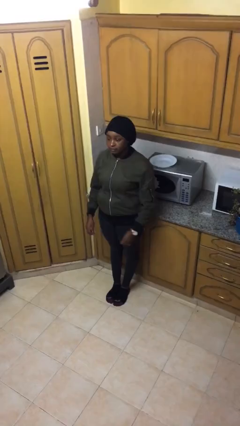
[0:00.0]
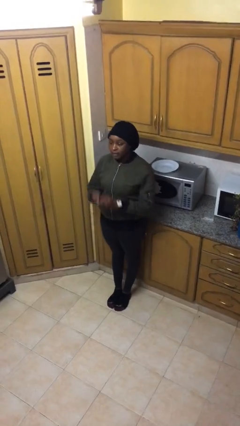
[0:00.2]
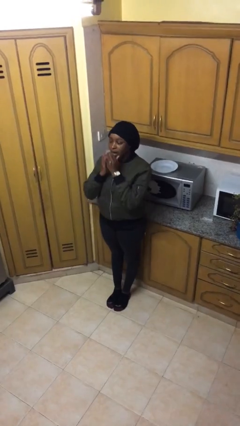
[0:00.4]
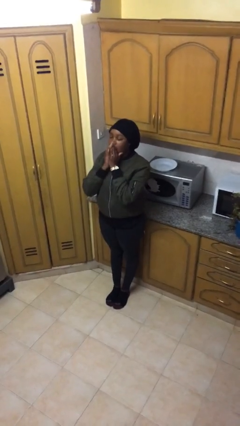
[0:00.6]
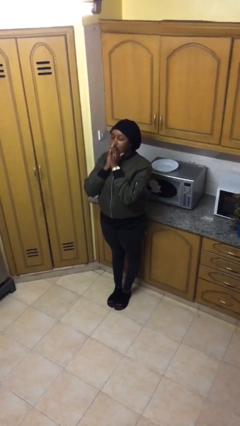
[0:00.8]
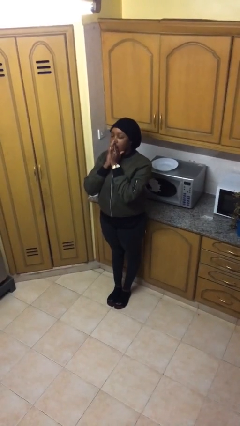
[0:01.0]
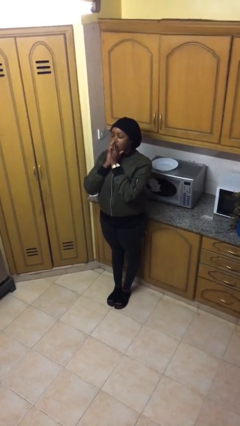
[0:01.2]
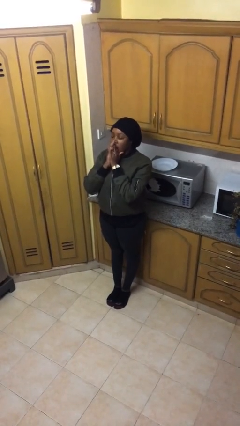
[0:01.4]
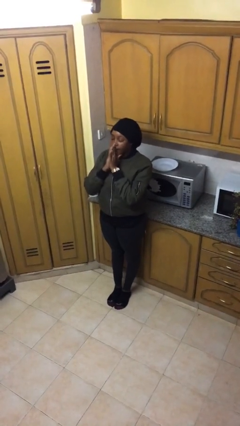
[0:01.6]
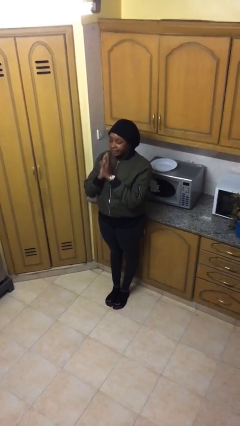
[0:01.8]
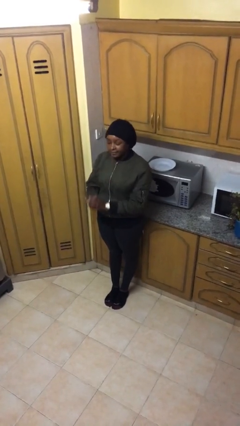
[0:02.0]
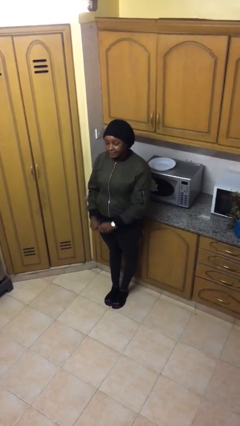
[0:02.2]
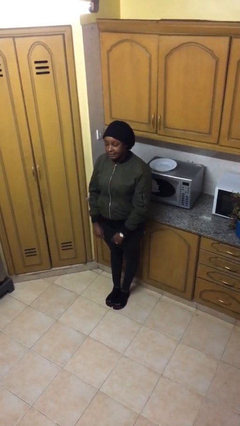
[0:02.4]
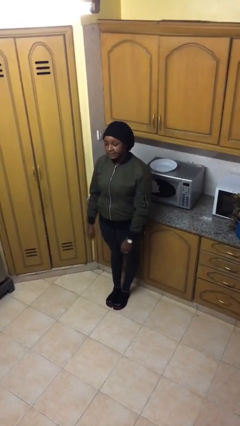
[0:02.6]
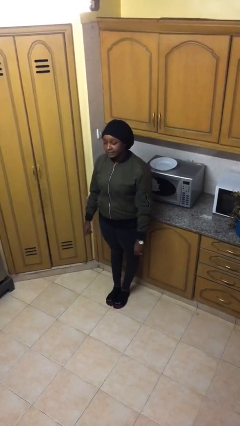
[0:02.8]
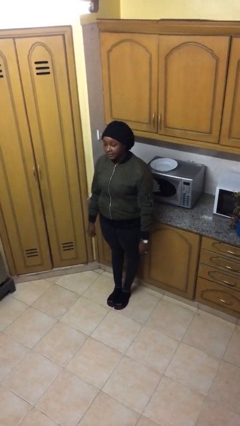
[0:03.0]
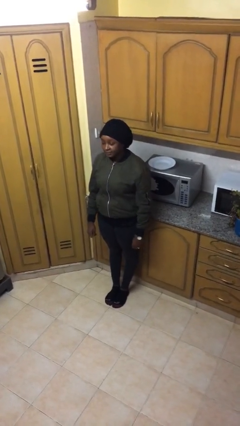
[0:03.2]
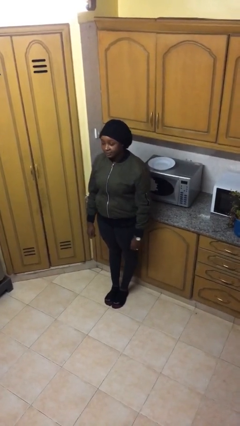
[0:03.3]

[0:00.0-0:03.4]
person yawns

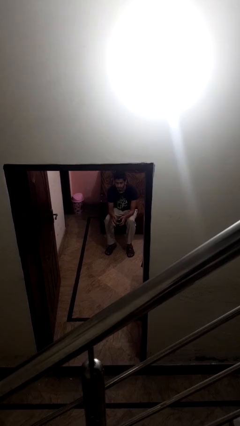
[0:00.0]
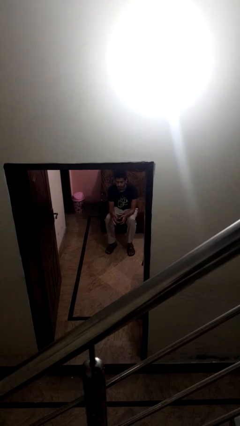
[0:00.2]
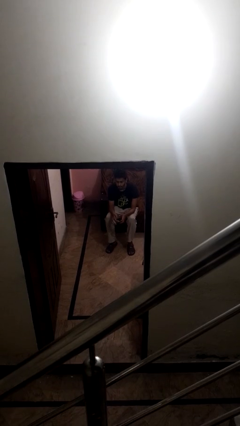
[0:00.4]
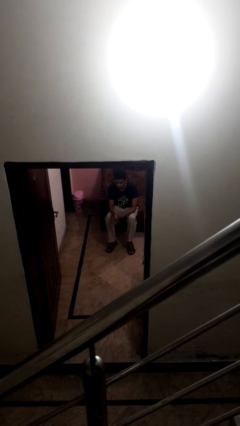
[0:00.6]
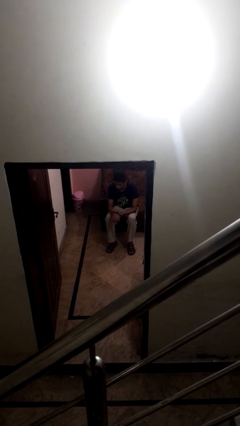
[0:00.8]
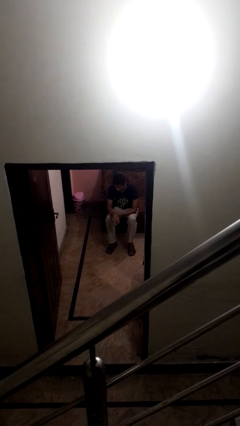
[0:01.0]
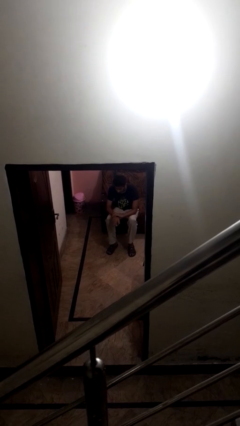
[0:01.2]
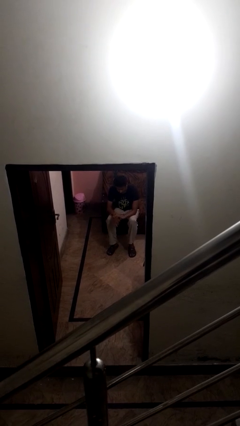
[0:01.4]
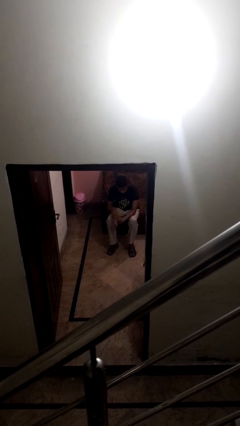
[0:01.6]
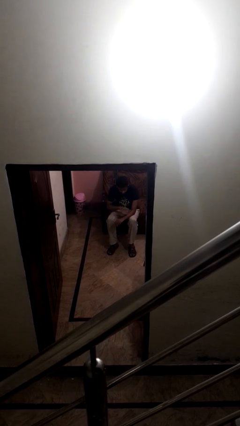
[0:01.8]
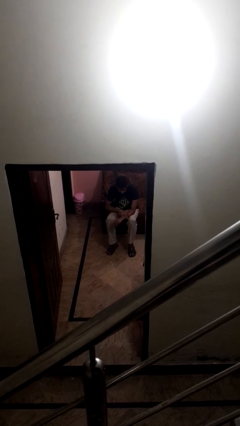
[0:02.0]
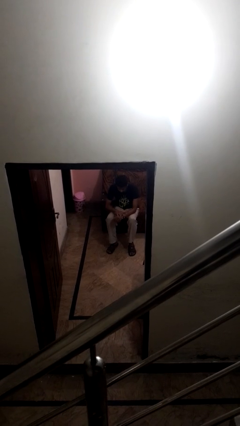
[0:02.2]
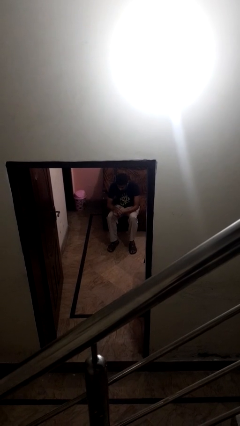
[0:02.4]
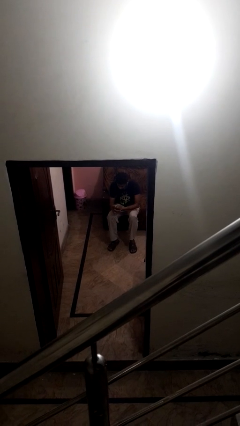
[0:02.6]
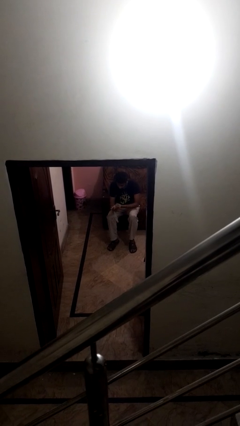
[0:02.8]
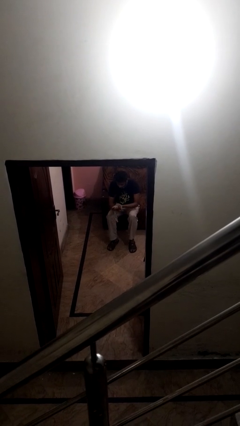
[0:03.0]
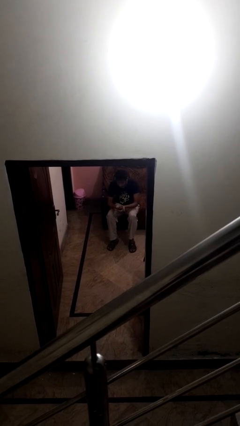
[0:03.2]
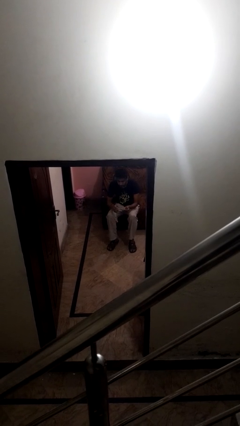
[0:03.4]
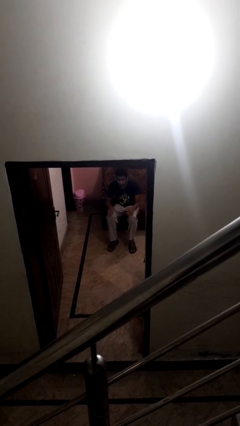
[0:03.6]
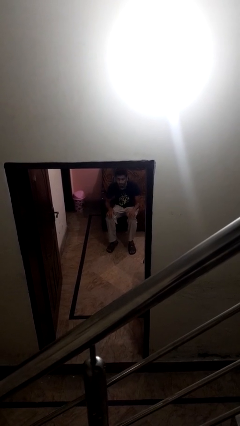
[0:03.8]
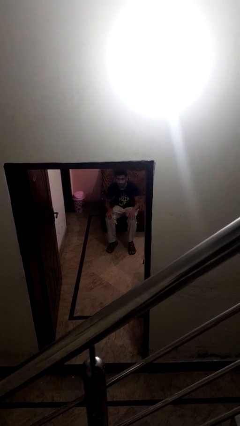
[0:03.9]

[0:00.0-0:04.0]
person looks at hands in lap

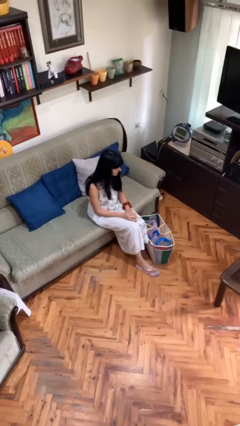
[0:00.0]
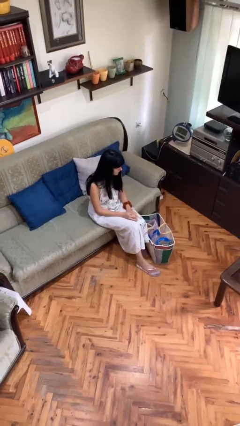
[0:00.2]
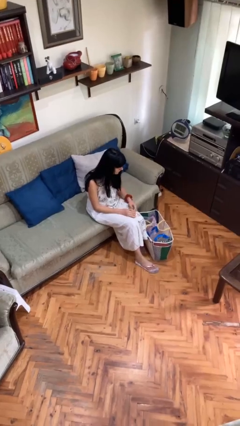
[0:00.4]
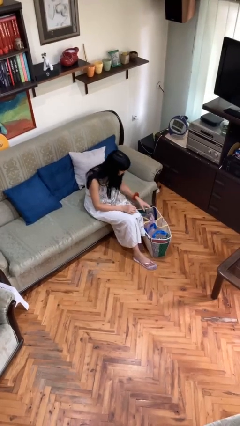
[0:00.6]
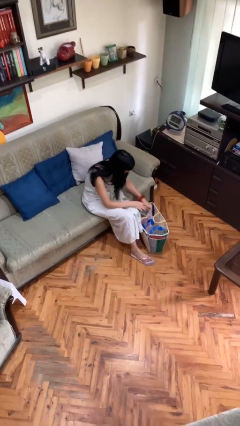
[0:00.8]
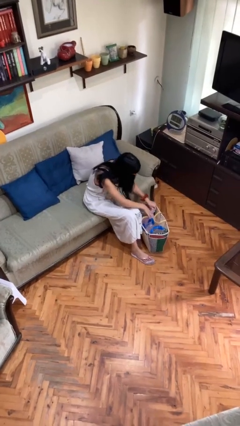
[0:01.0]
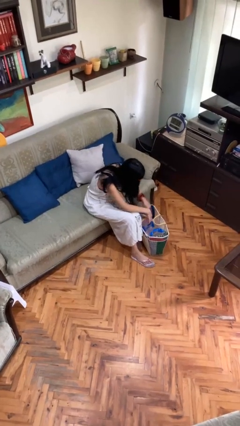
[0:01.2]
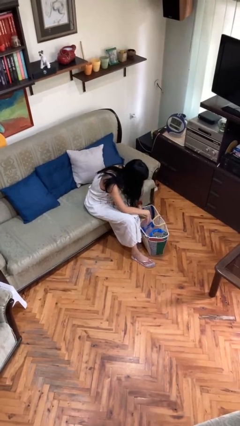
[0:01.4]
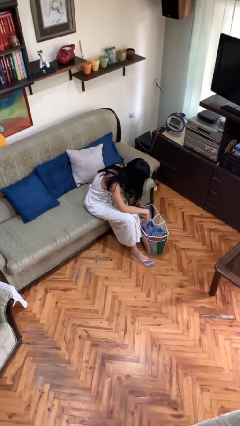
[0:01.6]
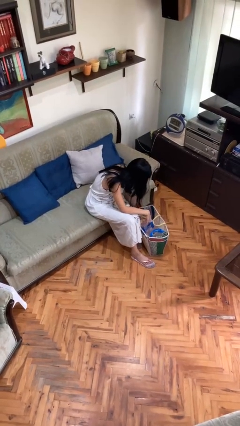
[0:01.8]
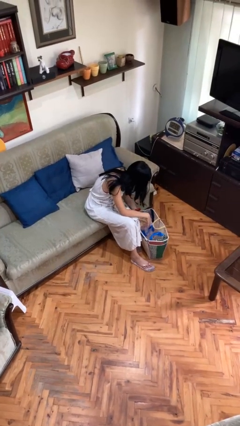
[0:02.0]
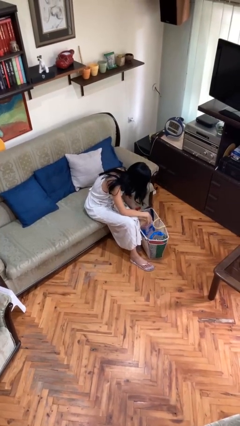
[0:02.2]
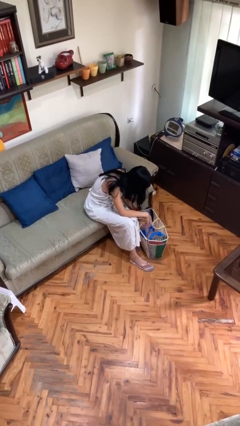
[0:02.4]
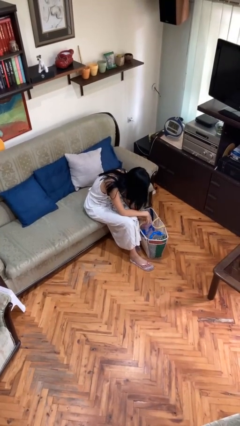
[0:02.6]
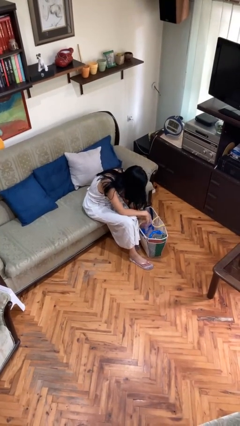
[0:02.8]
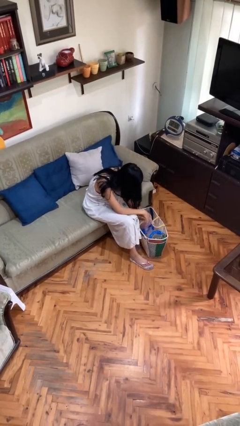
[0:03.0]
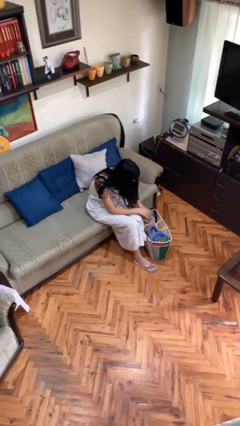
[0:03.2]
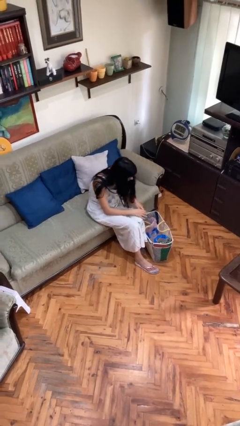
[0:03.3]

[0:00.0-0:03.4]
person searches in bag

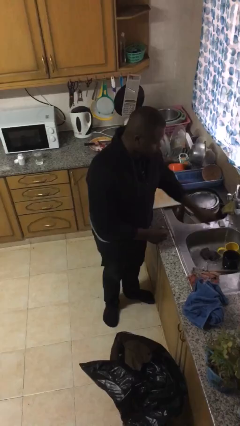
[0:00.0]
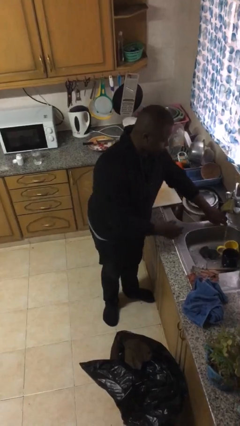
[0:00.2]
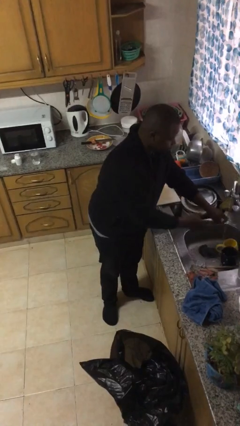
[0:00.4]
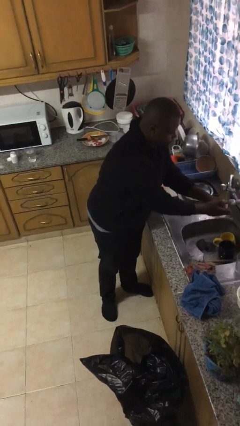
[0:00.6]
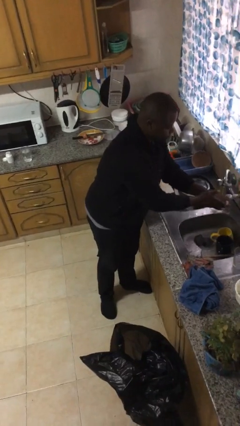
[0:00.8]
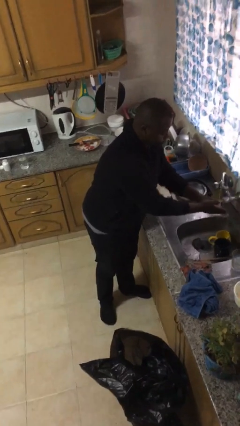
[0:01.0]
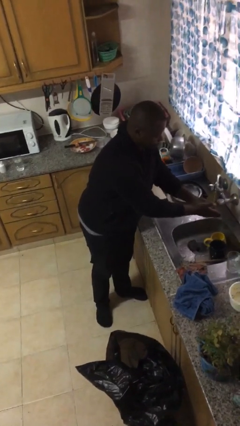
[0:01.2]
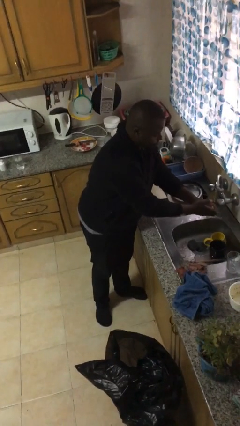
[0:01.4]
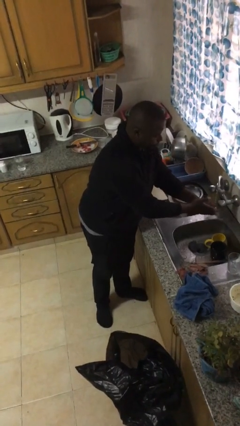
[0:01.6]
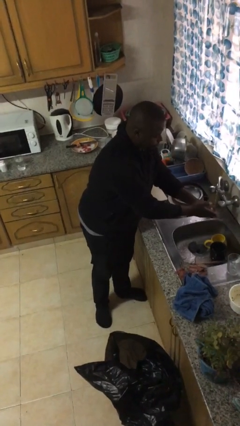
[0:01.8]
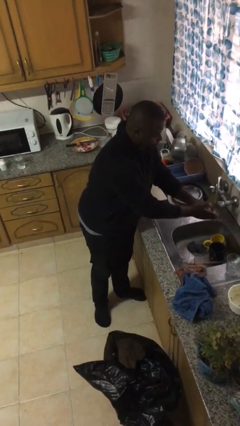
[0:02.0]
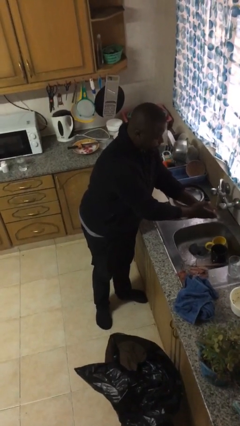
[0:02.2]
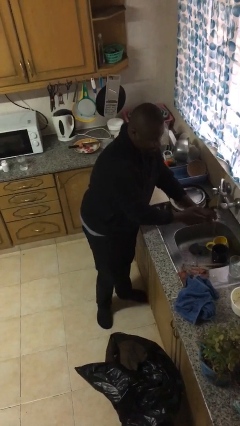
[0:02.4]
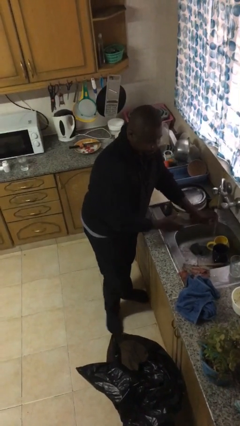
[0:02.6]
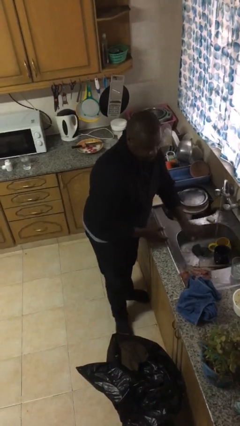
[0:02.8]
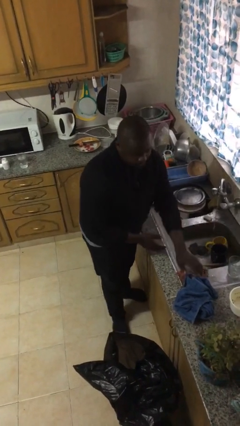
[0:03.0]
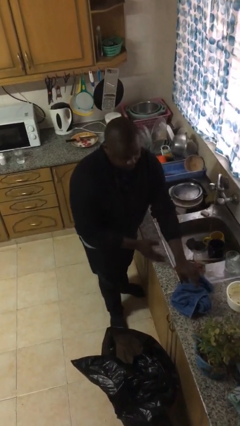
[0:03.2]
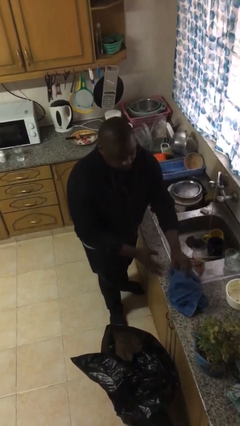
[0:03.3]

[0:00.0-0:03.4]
person washes hands

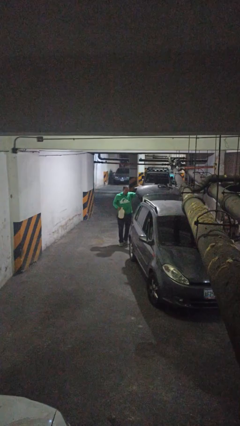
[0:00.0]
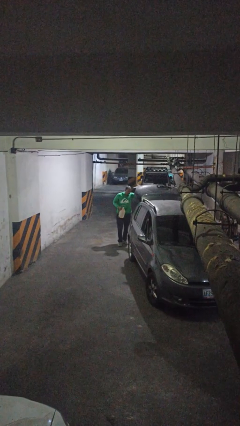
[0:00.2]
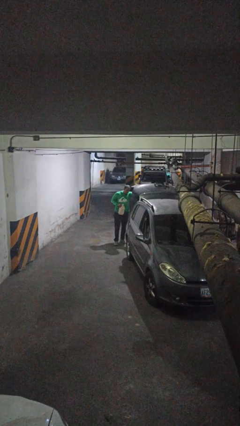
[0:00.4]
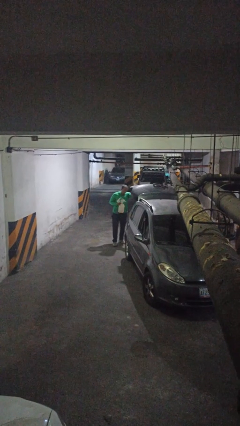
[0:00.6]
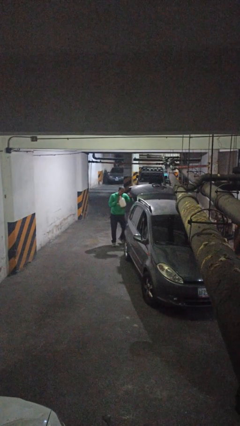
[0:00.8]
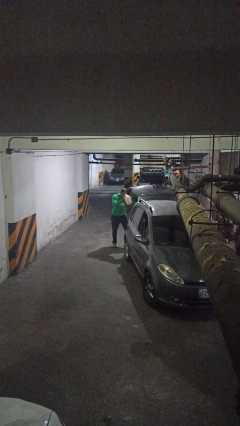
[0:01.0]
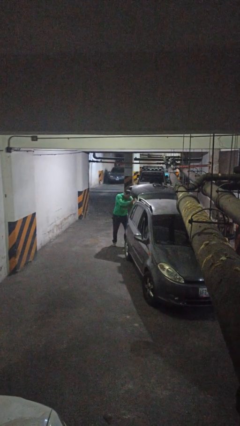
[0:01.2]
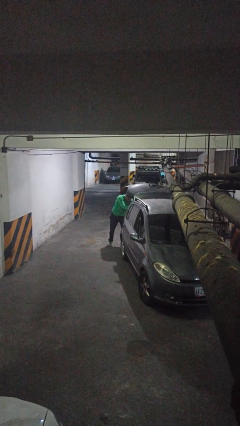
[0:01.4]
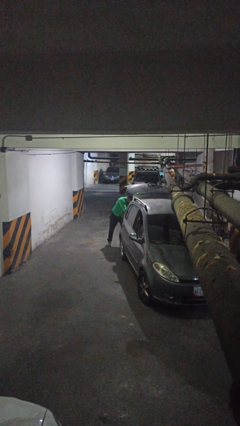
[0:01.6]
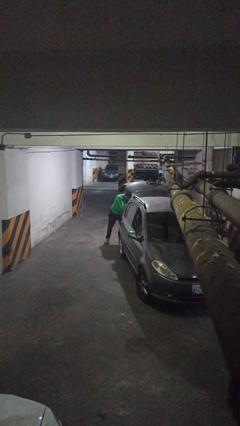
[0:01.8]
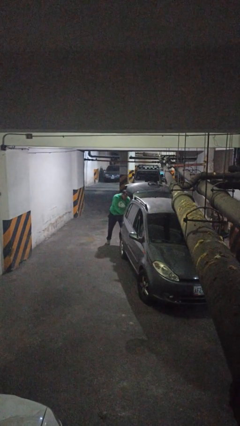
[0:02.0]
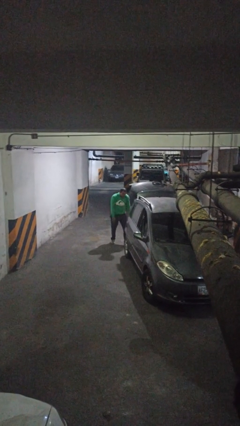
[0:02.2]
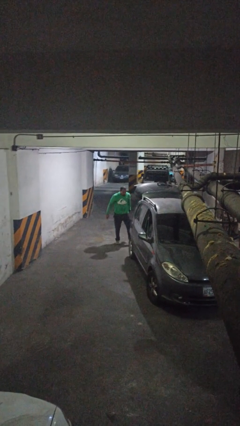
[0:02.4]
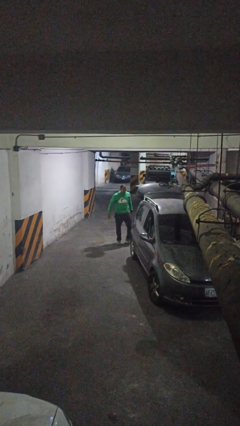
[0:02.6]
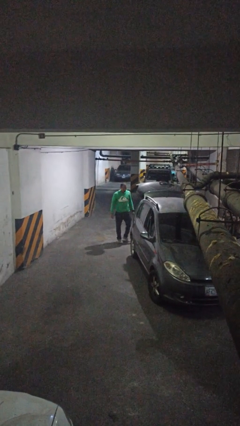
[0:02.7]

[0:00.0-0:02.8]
person loads car

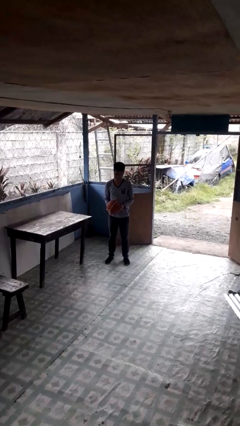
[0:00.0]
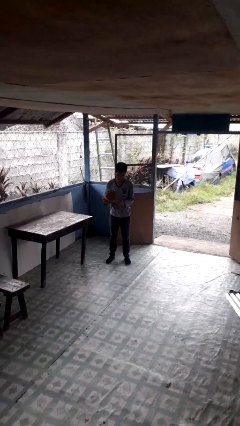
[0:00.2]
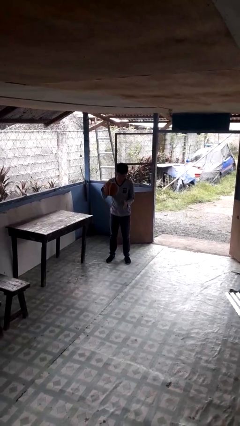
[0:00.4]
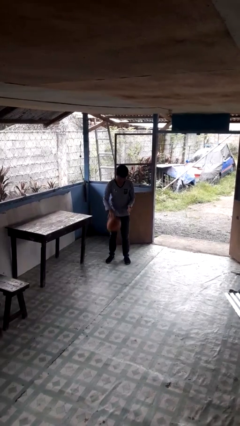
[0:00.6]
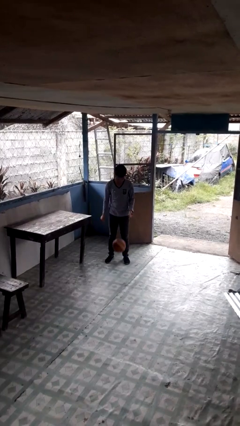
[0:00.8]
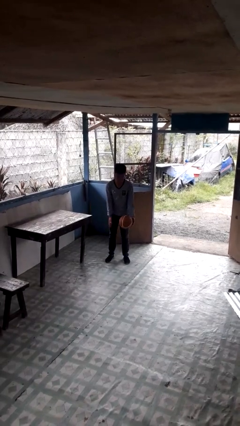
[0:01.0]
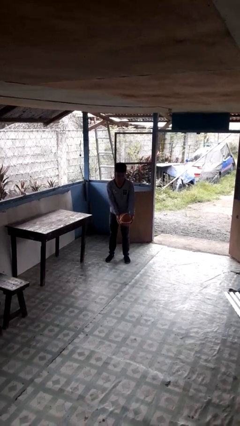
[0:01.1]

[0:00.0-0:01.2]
person bounces ball on floor
